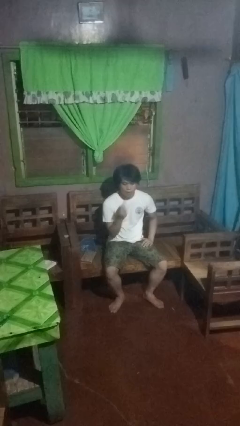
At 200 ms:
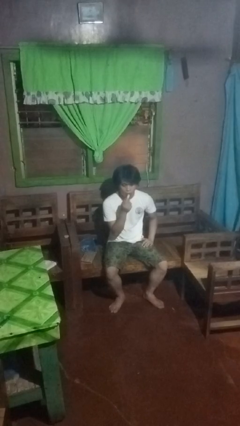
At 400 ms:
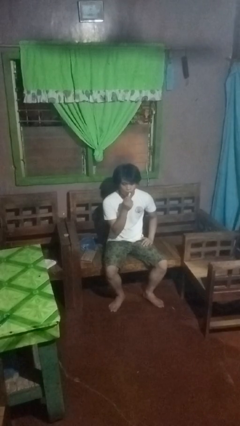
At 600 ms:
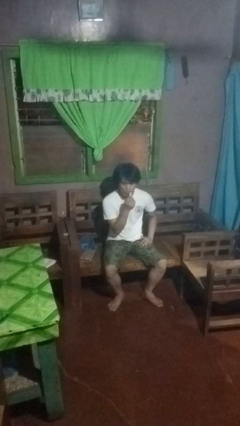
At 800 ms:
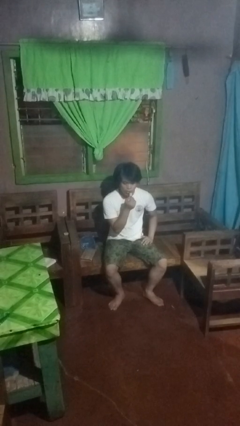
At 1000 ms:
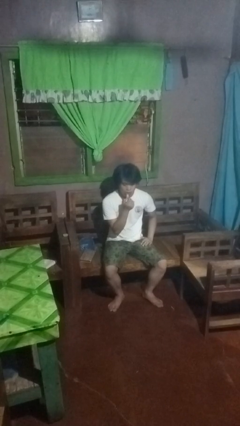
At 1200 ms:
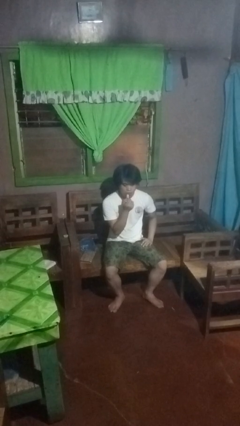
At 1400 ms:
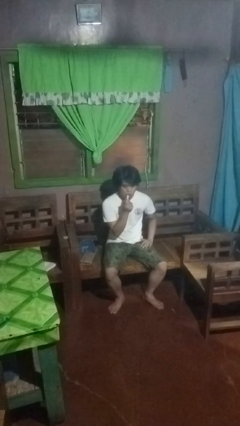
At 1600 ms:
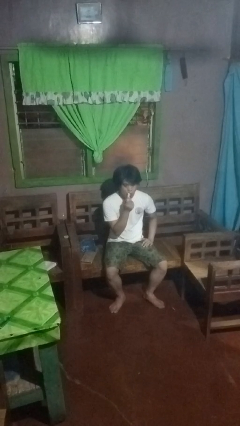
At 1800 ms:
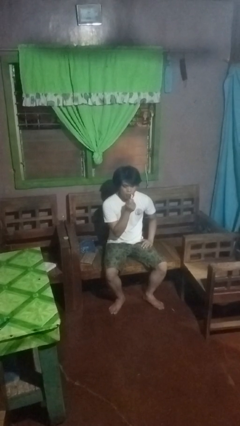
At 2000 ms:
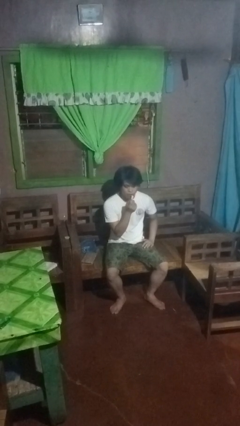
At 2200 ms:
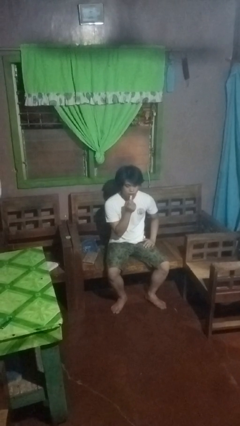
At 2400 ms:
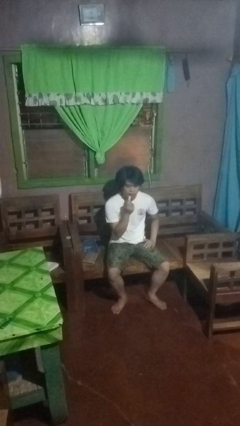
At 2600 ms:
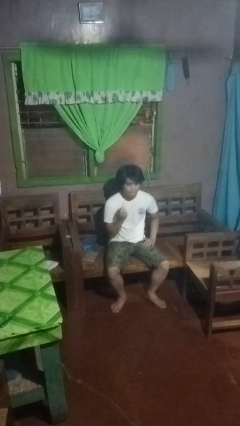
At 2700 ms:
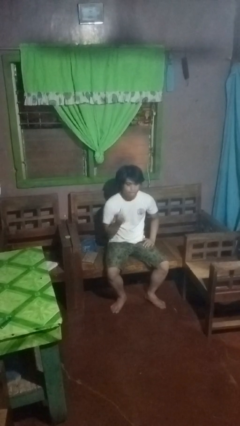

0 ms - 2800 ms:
person applies lip makeup

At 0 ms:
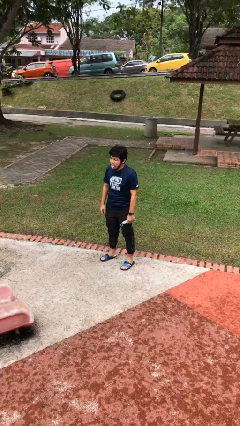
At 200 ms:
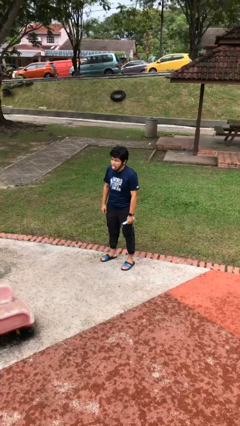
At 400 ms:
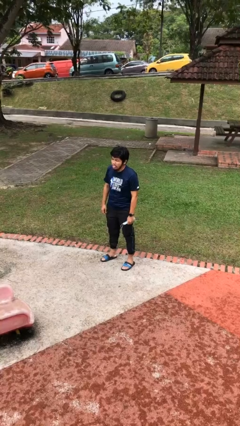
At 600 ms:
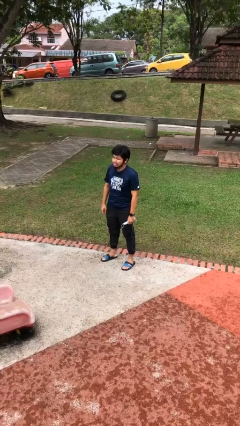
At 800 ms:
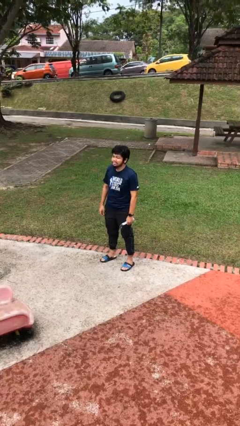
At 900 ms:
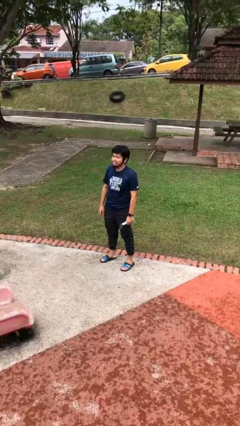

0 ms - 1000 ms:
person sticks out tongue

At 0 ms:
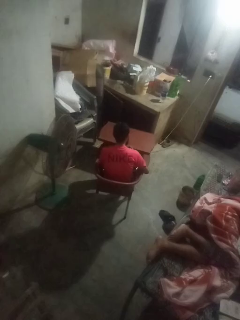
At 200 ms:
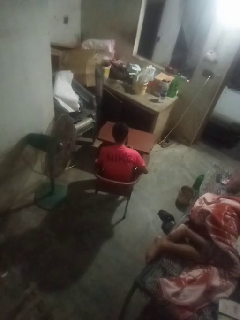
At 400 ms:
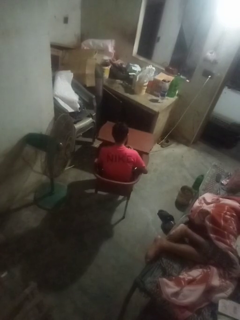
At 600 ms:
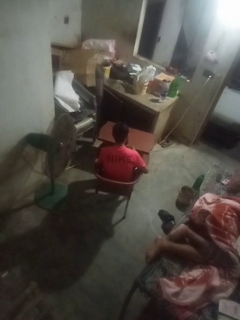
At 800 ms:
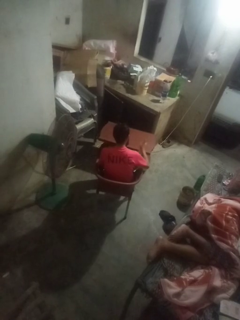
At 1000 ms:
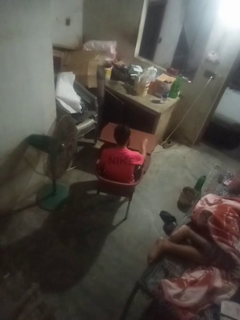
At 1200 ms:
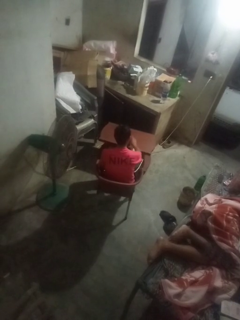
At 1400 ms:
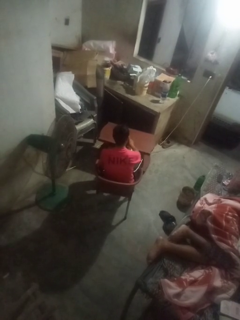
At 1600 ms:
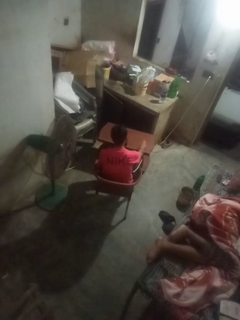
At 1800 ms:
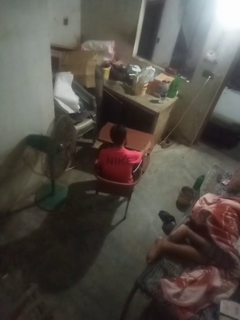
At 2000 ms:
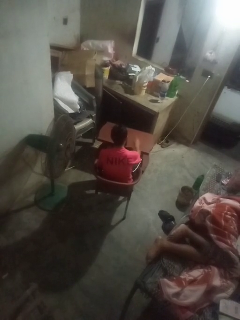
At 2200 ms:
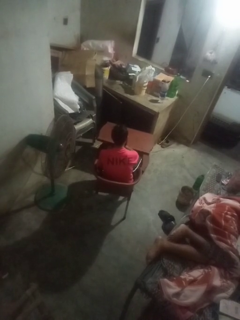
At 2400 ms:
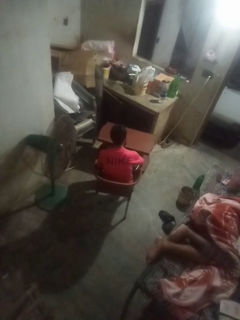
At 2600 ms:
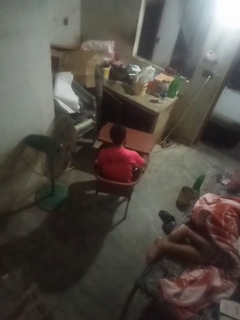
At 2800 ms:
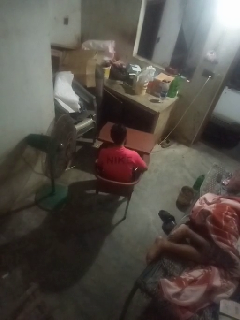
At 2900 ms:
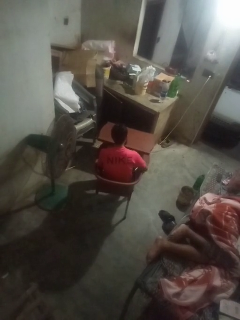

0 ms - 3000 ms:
person sprays from bottle

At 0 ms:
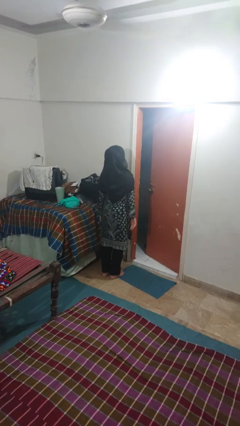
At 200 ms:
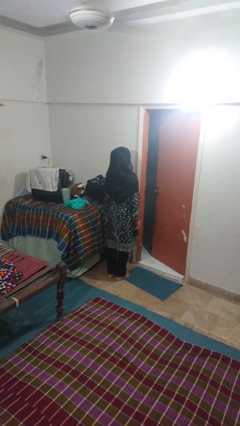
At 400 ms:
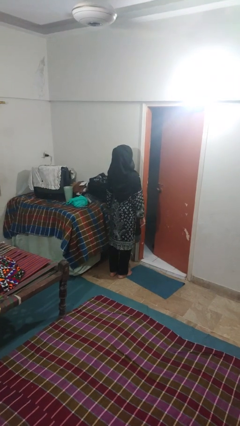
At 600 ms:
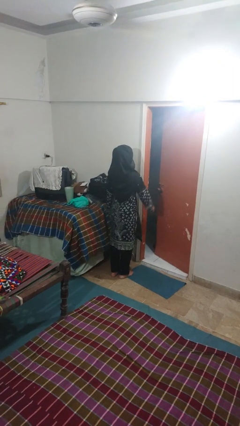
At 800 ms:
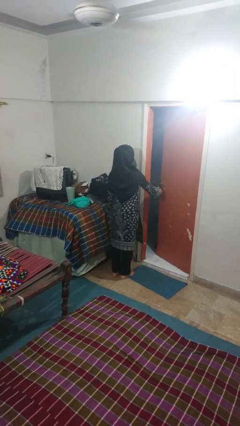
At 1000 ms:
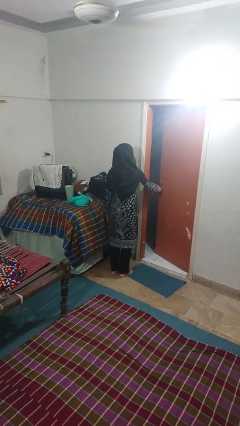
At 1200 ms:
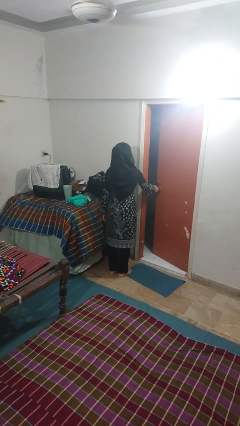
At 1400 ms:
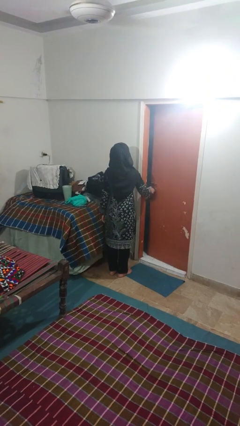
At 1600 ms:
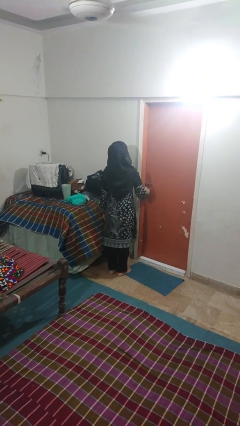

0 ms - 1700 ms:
person closes facility door

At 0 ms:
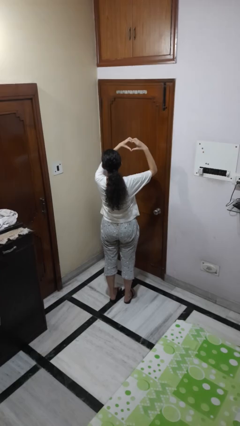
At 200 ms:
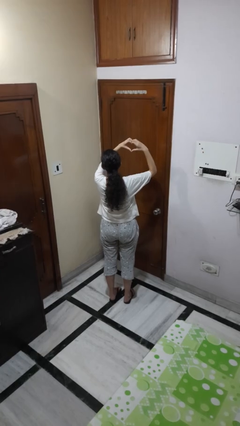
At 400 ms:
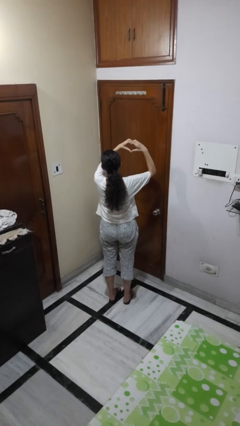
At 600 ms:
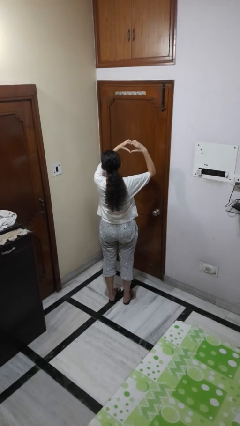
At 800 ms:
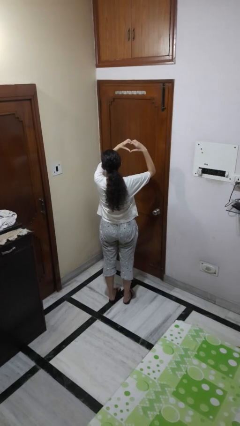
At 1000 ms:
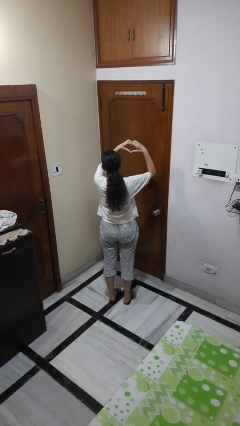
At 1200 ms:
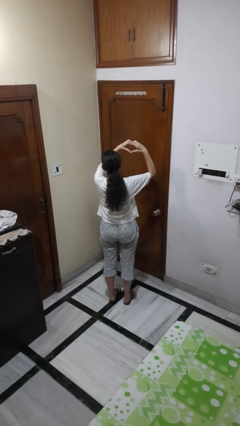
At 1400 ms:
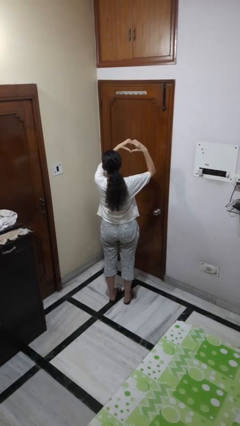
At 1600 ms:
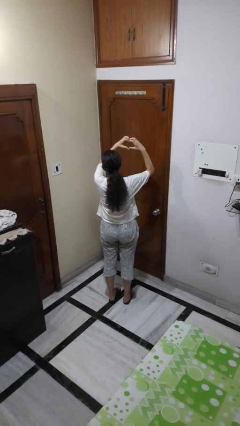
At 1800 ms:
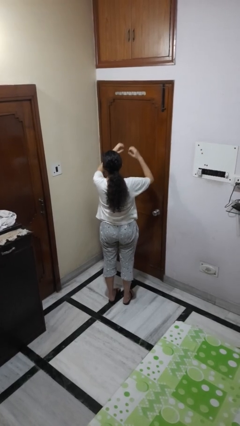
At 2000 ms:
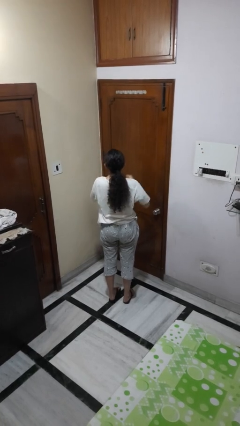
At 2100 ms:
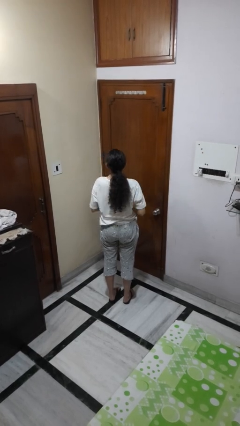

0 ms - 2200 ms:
person gestures heart

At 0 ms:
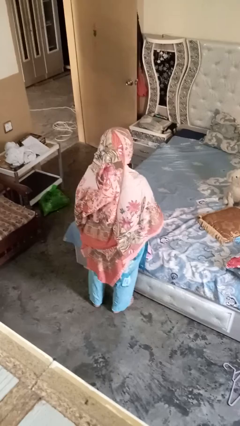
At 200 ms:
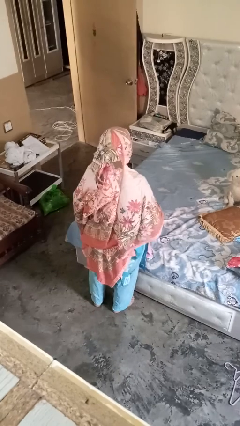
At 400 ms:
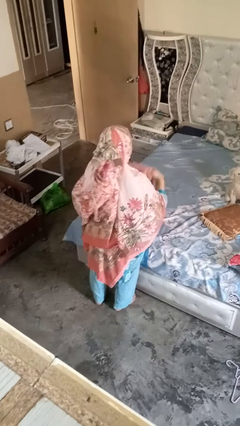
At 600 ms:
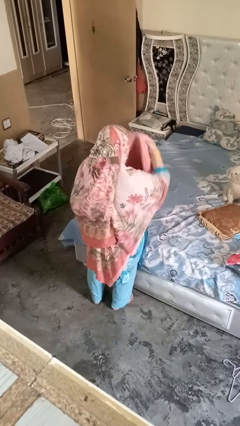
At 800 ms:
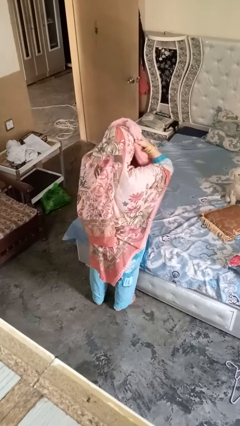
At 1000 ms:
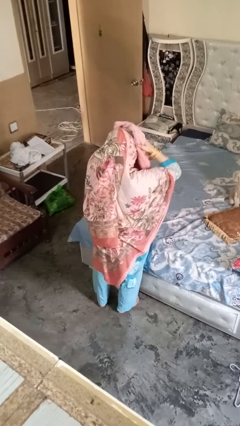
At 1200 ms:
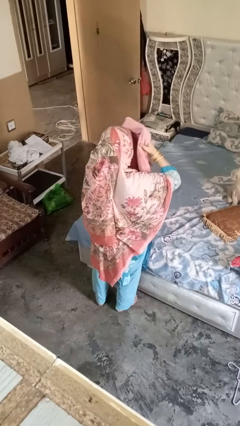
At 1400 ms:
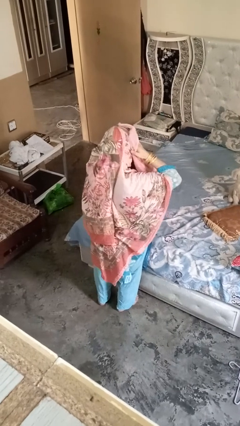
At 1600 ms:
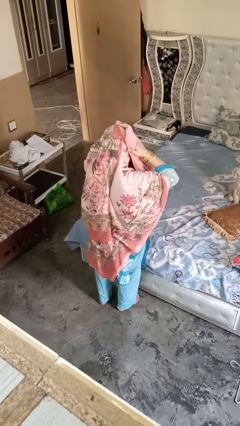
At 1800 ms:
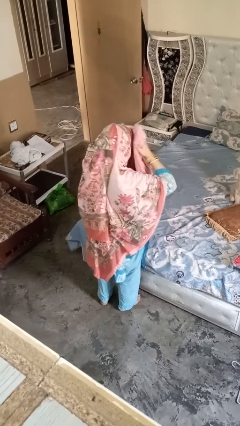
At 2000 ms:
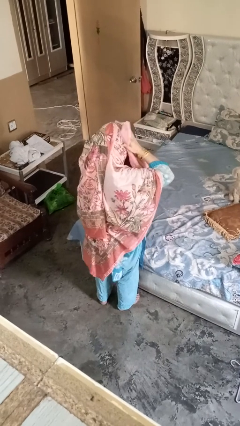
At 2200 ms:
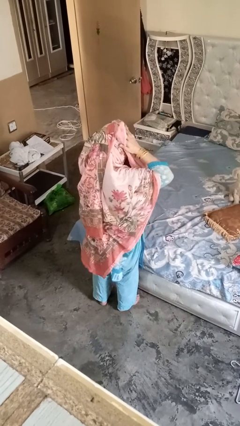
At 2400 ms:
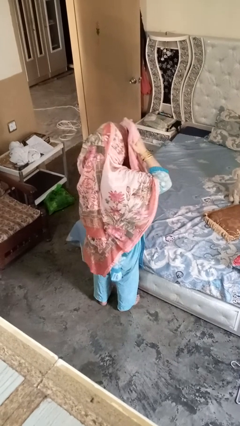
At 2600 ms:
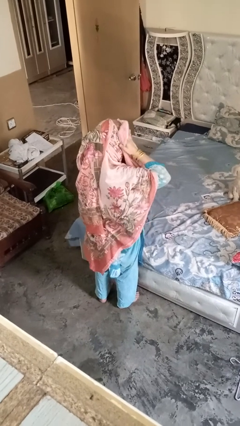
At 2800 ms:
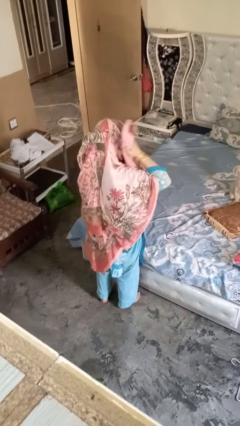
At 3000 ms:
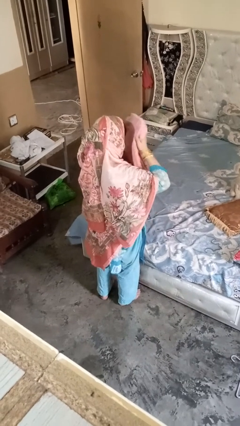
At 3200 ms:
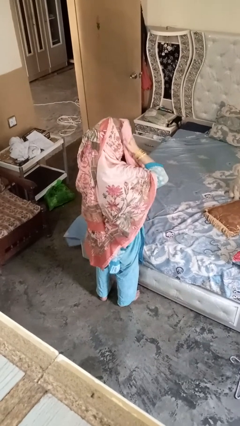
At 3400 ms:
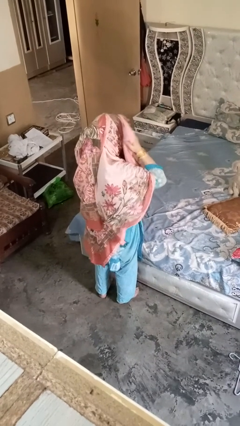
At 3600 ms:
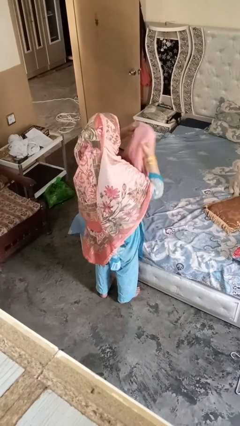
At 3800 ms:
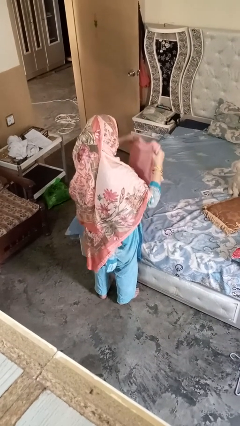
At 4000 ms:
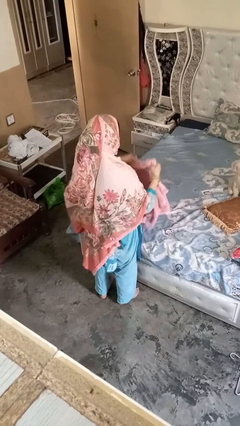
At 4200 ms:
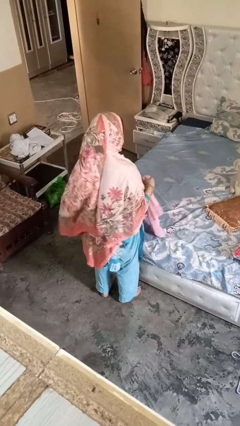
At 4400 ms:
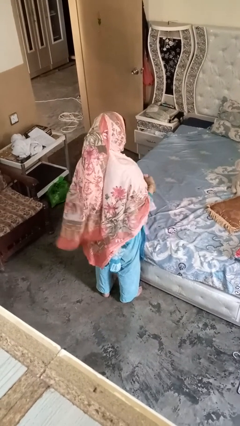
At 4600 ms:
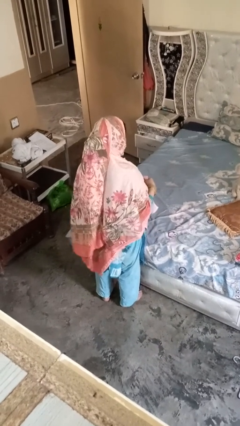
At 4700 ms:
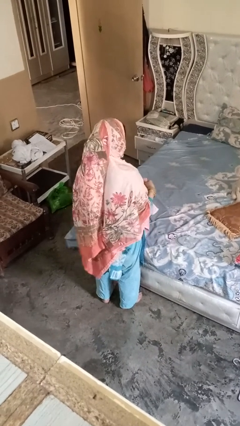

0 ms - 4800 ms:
person dries hair with hairdryer

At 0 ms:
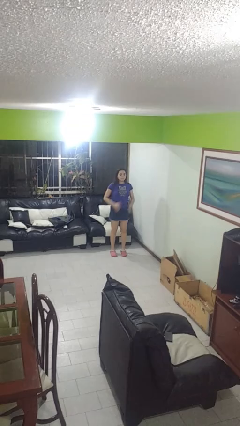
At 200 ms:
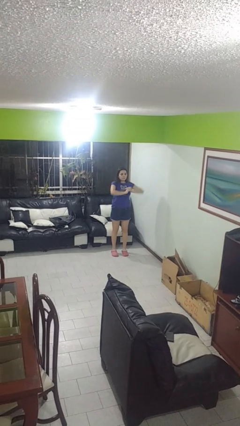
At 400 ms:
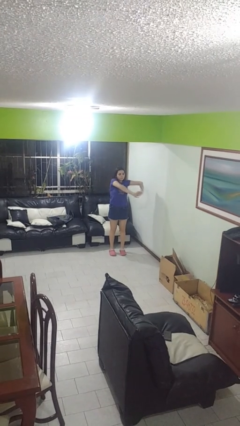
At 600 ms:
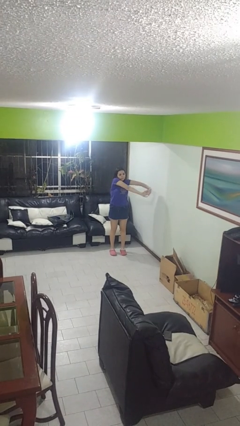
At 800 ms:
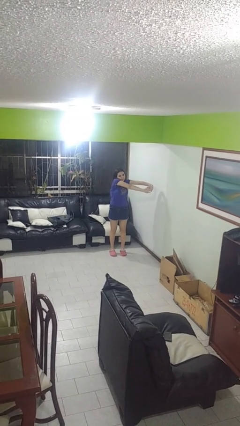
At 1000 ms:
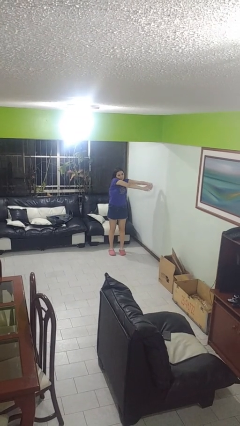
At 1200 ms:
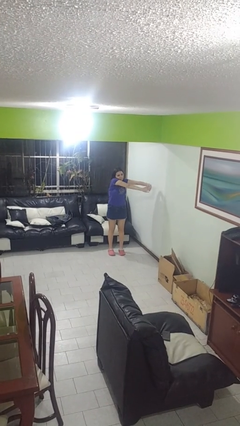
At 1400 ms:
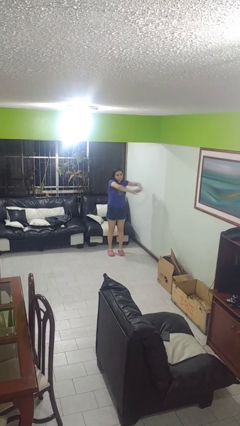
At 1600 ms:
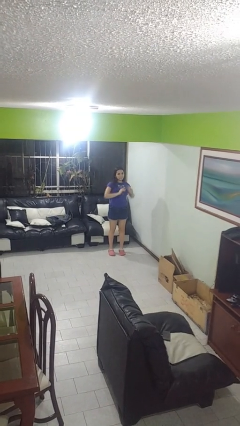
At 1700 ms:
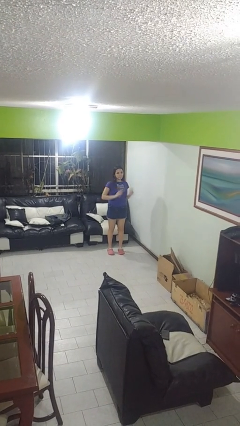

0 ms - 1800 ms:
person stretches arms to side

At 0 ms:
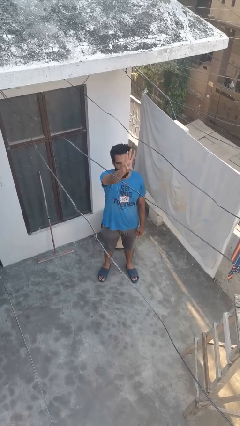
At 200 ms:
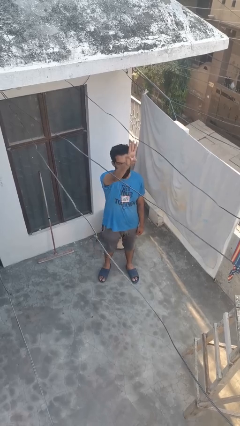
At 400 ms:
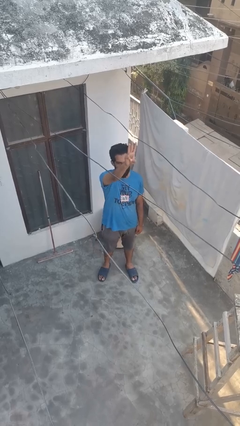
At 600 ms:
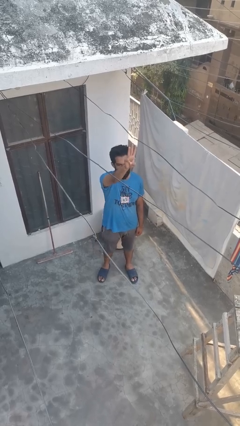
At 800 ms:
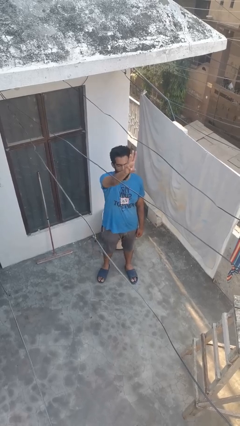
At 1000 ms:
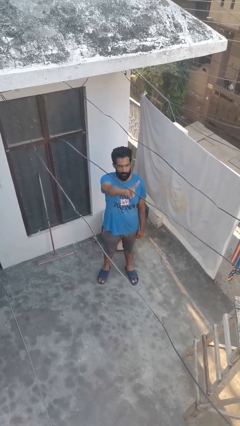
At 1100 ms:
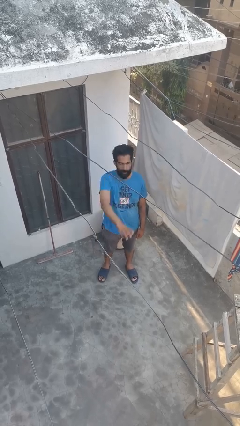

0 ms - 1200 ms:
person gestures number three
